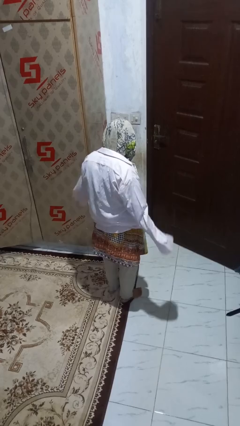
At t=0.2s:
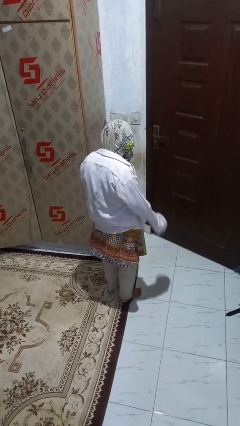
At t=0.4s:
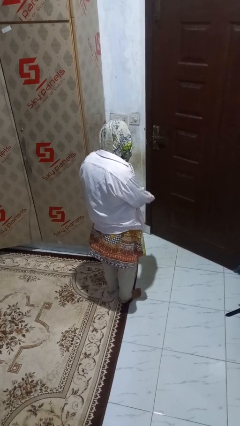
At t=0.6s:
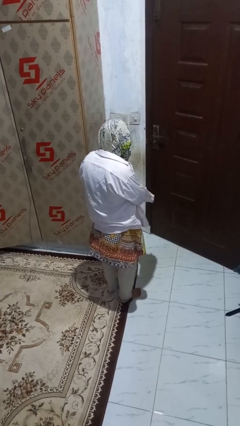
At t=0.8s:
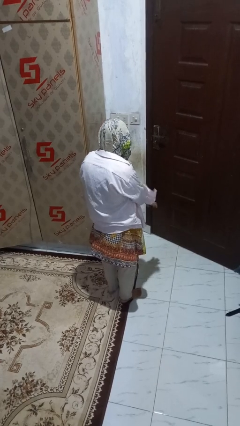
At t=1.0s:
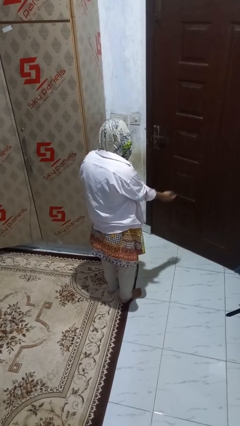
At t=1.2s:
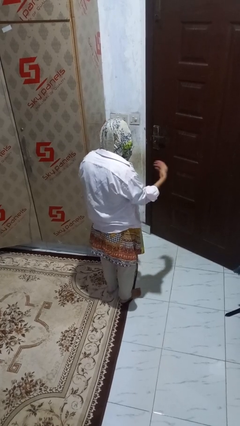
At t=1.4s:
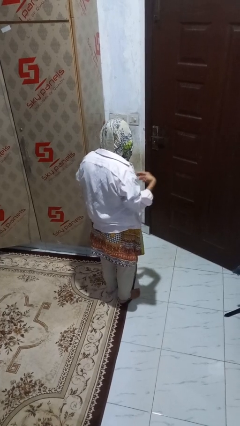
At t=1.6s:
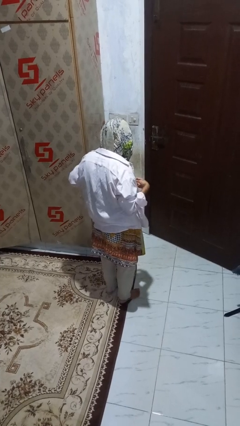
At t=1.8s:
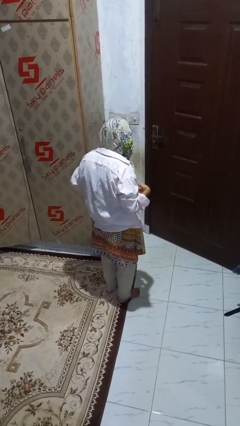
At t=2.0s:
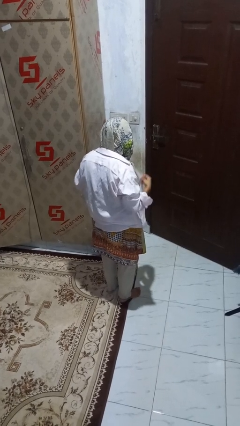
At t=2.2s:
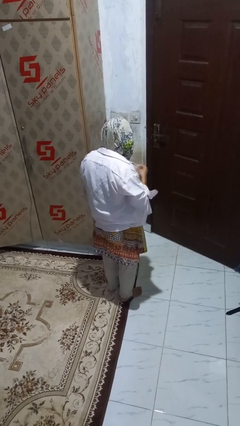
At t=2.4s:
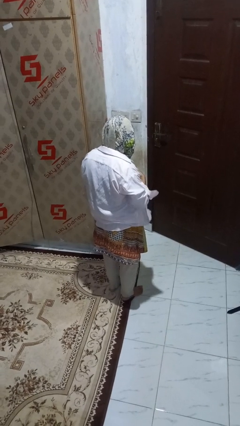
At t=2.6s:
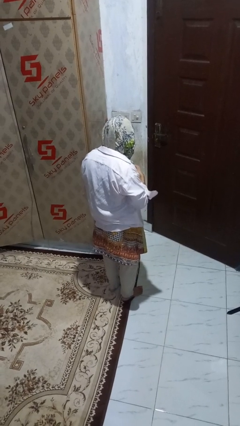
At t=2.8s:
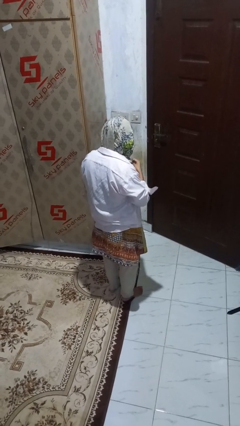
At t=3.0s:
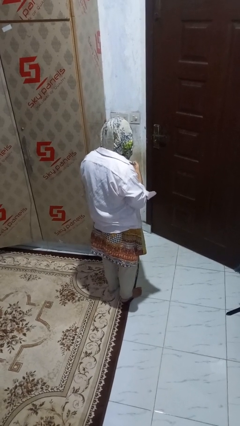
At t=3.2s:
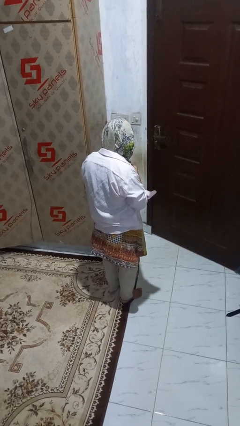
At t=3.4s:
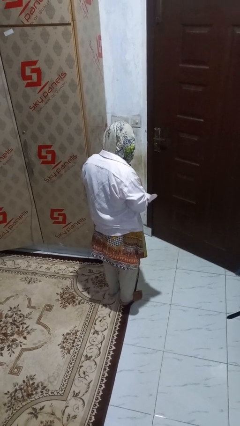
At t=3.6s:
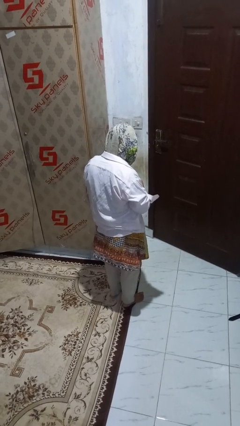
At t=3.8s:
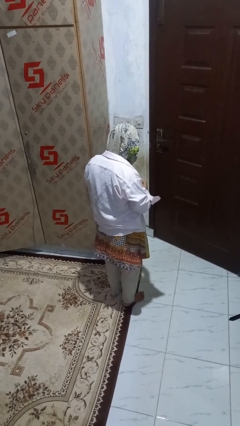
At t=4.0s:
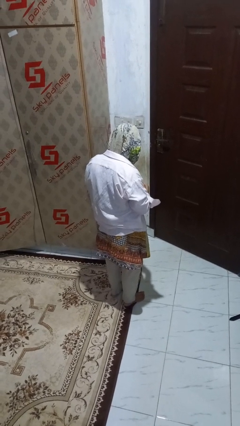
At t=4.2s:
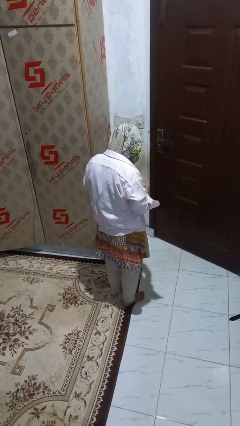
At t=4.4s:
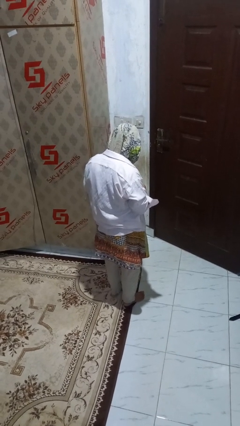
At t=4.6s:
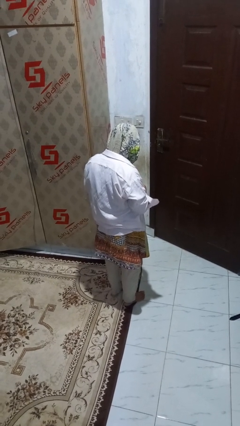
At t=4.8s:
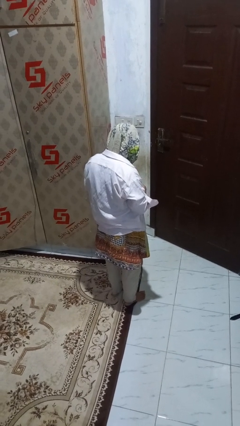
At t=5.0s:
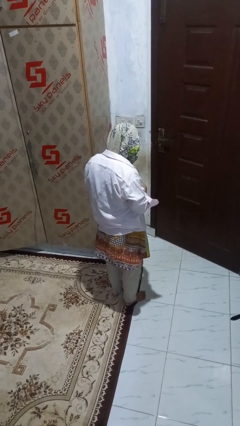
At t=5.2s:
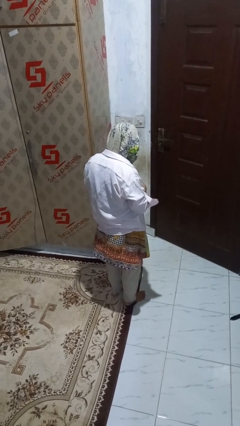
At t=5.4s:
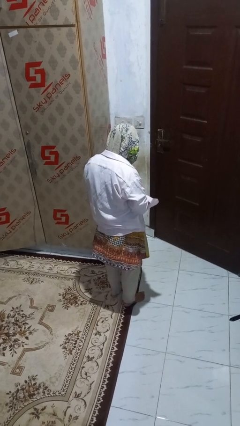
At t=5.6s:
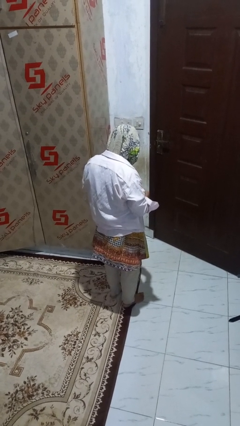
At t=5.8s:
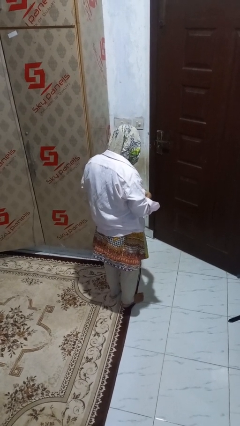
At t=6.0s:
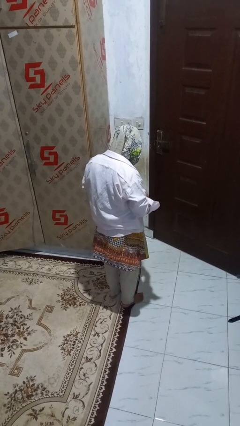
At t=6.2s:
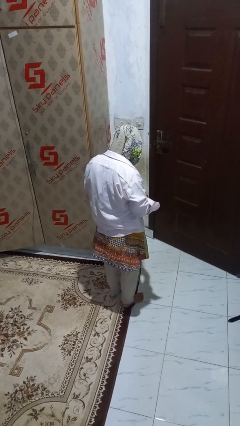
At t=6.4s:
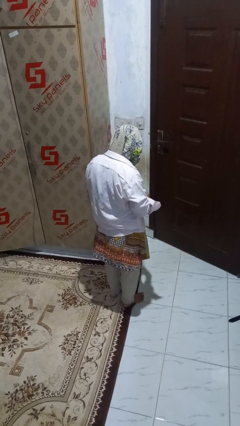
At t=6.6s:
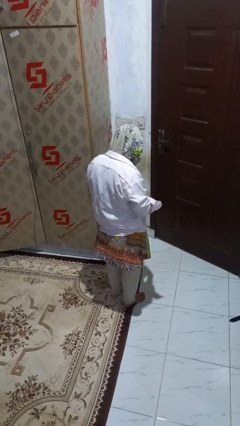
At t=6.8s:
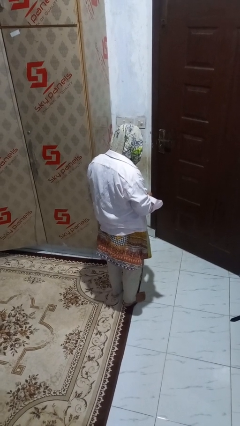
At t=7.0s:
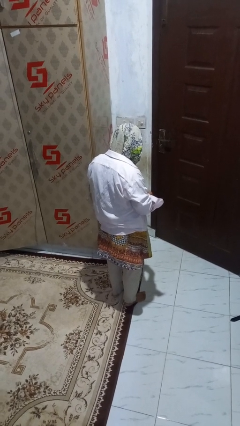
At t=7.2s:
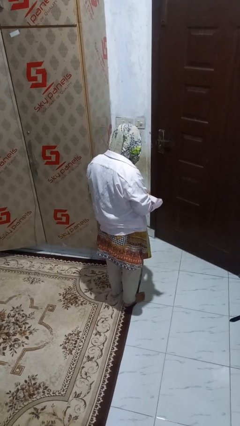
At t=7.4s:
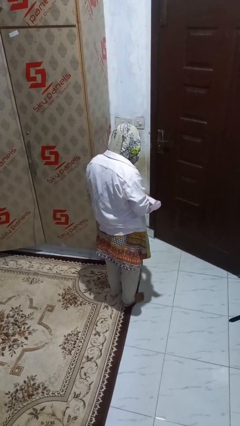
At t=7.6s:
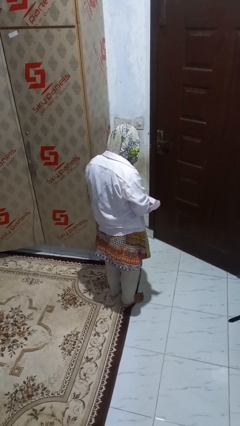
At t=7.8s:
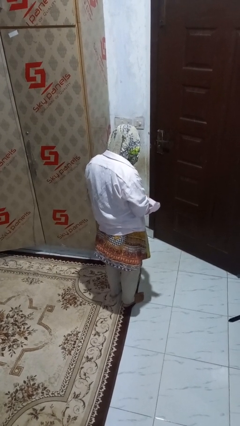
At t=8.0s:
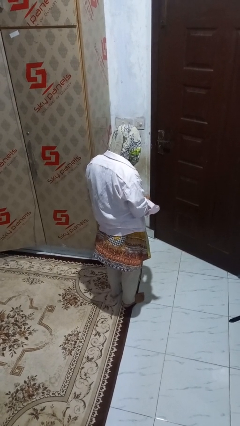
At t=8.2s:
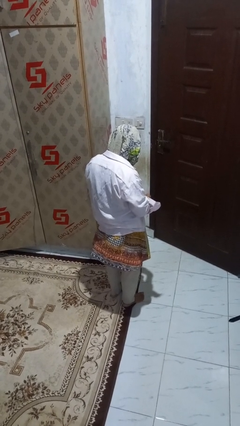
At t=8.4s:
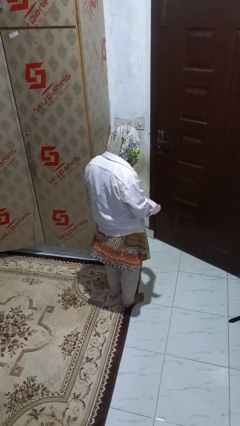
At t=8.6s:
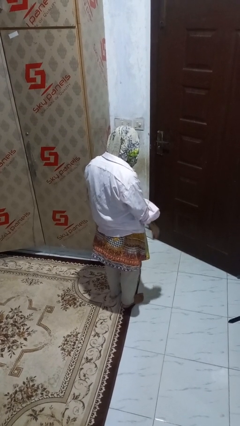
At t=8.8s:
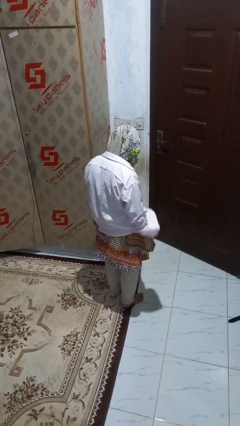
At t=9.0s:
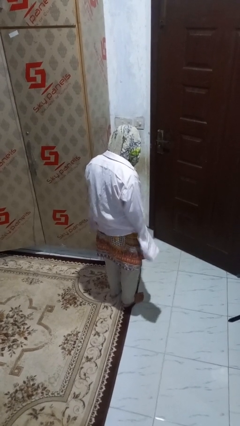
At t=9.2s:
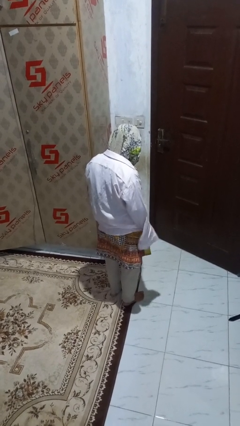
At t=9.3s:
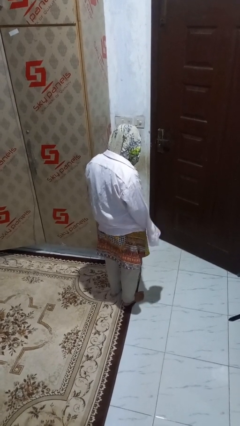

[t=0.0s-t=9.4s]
person buttons shirt

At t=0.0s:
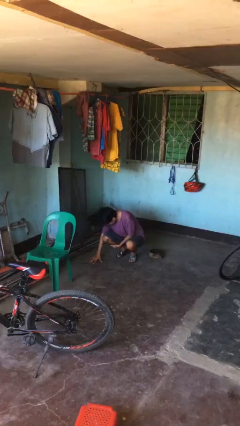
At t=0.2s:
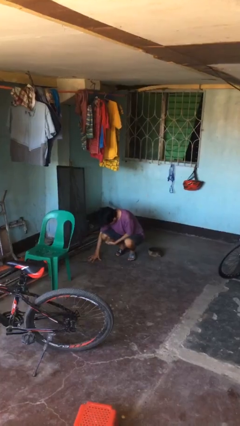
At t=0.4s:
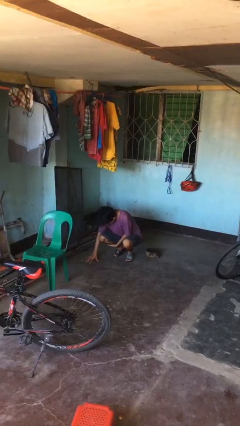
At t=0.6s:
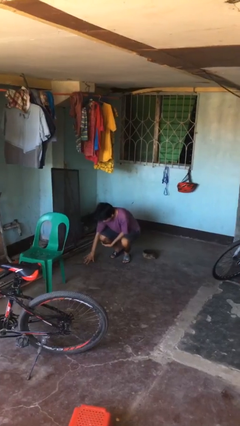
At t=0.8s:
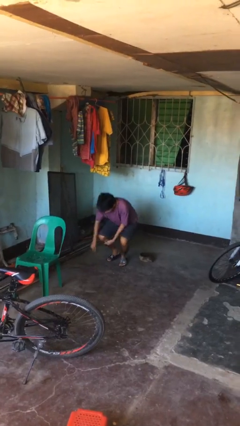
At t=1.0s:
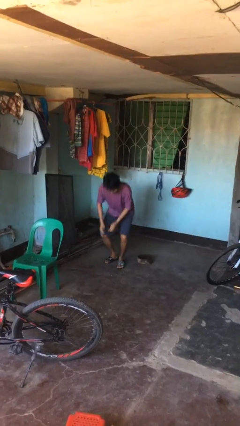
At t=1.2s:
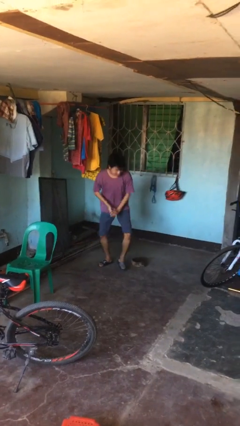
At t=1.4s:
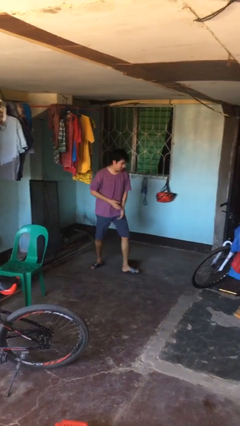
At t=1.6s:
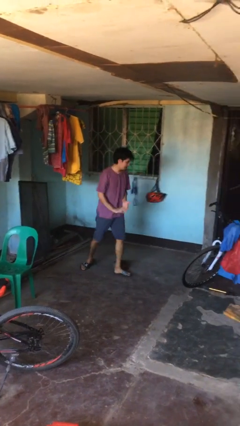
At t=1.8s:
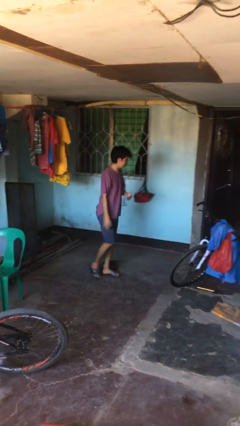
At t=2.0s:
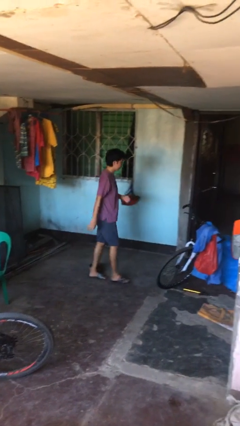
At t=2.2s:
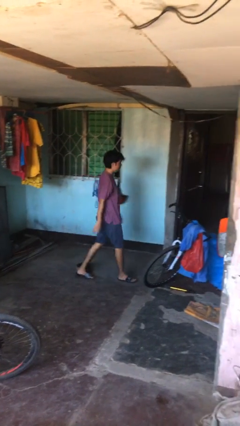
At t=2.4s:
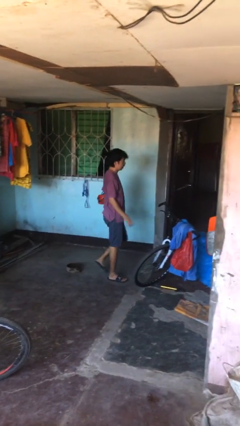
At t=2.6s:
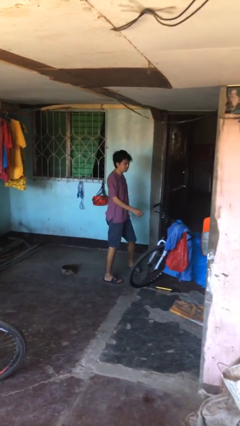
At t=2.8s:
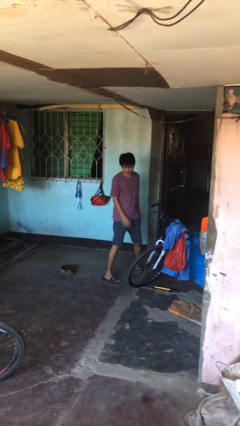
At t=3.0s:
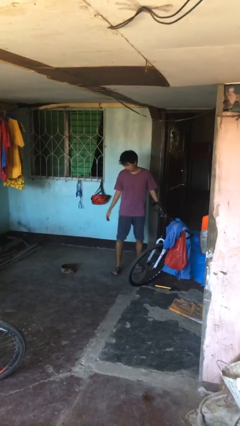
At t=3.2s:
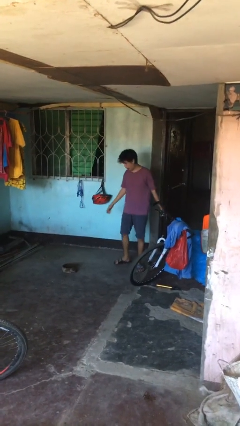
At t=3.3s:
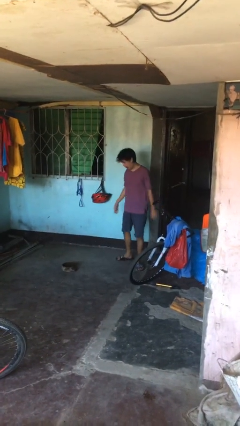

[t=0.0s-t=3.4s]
person stands up from floor

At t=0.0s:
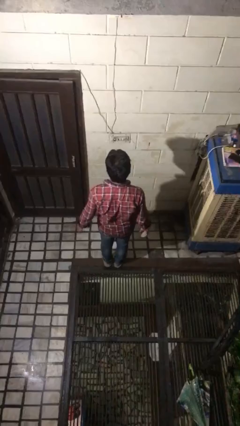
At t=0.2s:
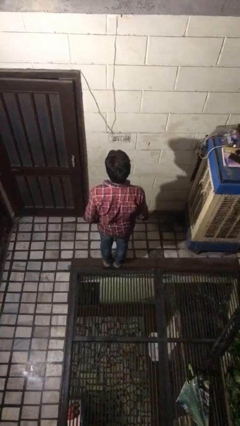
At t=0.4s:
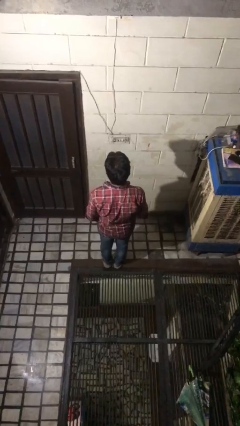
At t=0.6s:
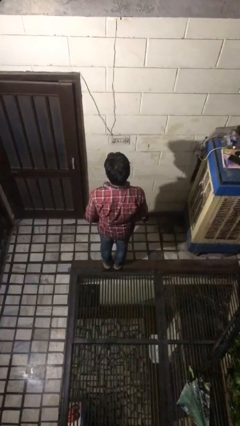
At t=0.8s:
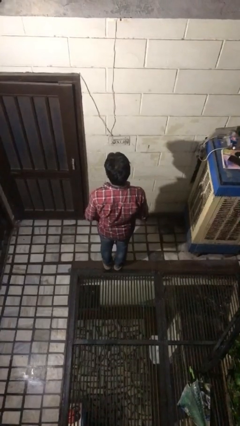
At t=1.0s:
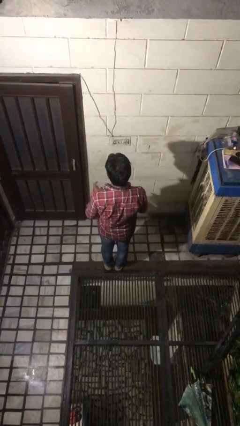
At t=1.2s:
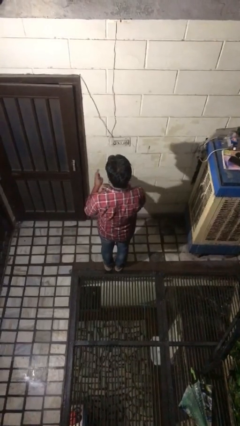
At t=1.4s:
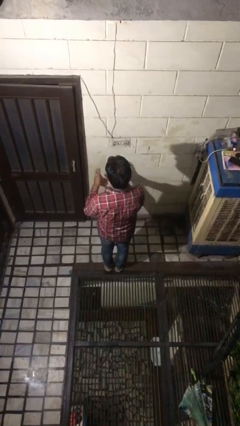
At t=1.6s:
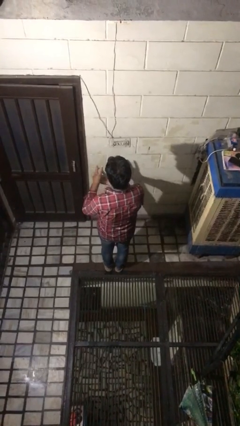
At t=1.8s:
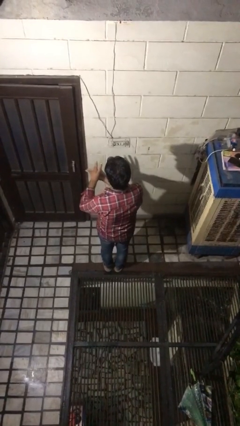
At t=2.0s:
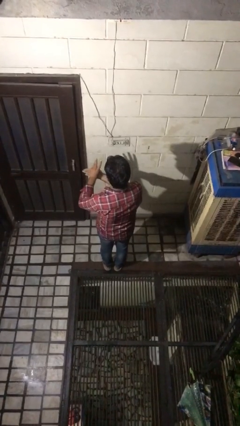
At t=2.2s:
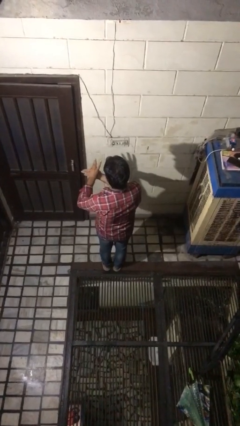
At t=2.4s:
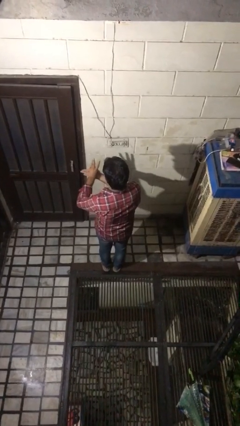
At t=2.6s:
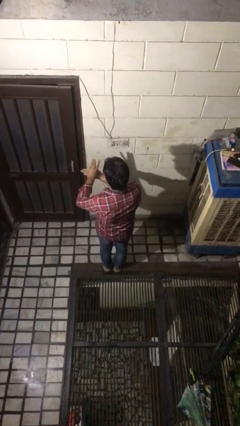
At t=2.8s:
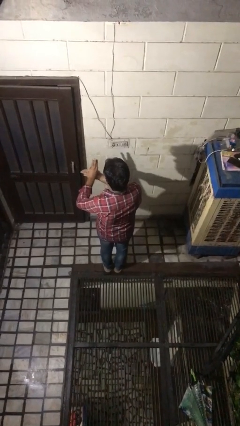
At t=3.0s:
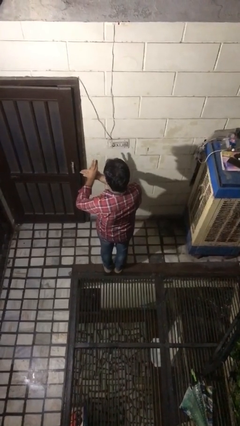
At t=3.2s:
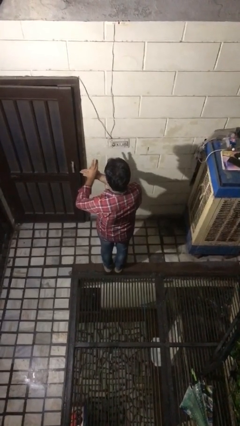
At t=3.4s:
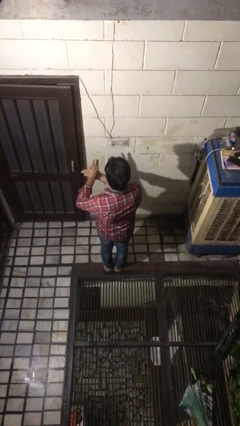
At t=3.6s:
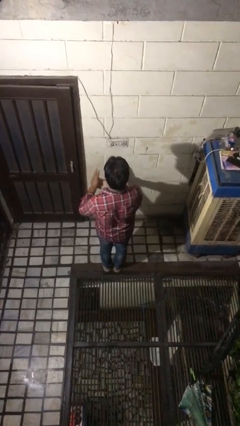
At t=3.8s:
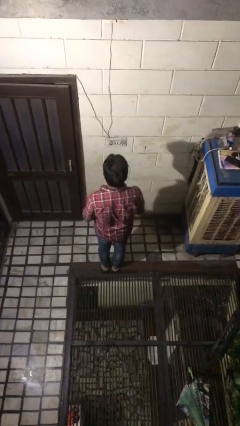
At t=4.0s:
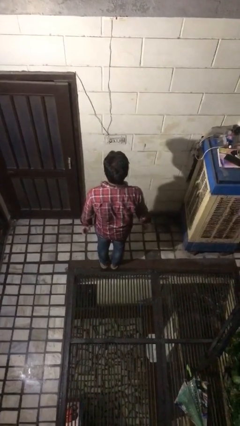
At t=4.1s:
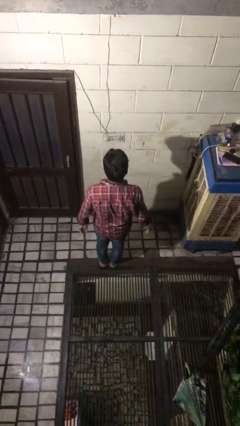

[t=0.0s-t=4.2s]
person gestures number three

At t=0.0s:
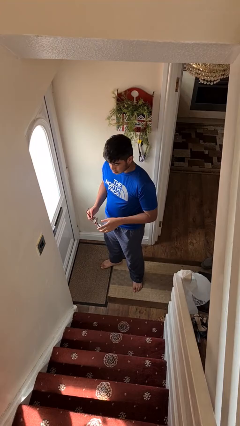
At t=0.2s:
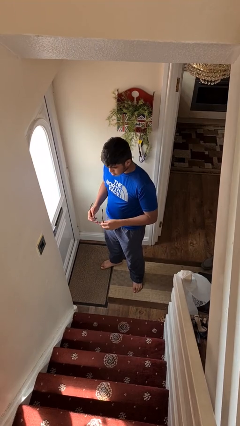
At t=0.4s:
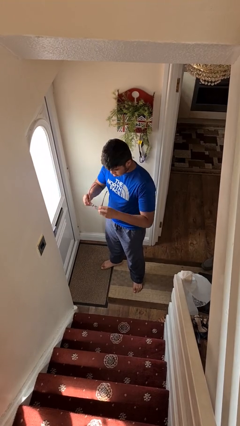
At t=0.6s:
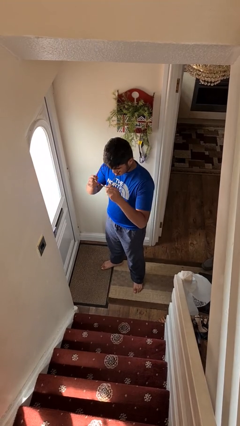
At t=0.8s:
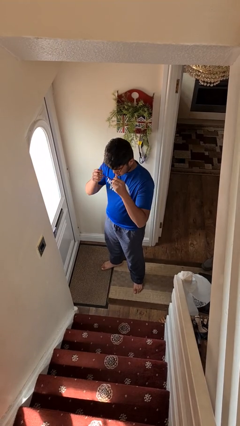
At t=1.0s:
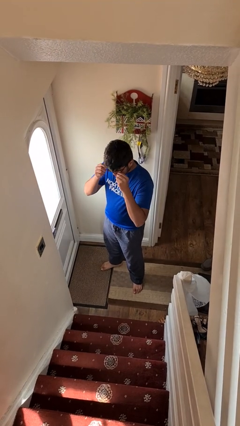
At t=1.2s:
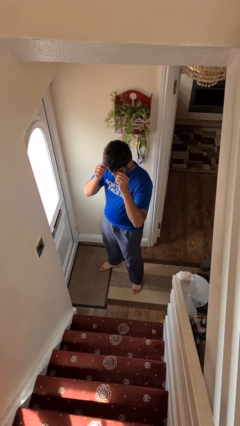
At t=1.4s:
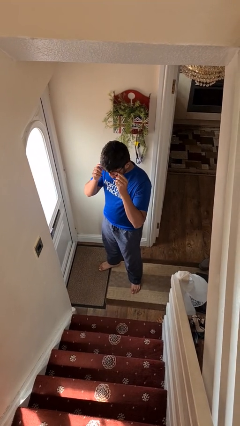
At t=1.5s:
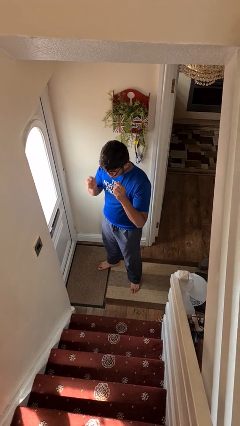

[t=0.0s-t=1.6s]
person puts on glasses
